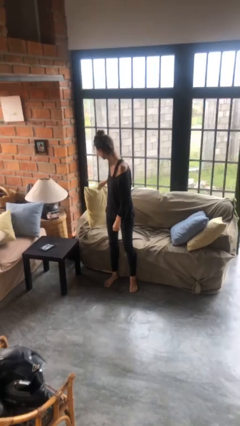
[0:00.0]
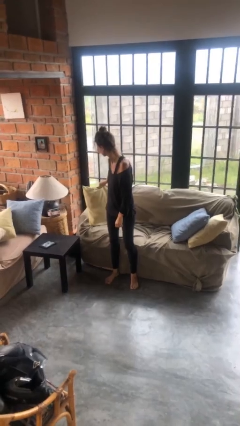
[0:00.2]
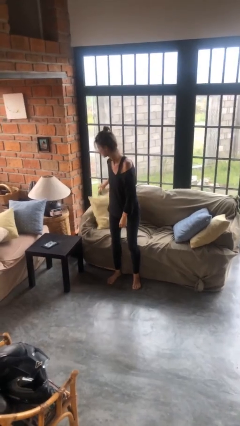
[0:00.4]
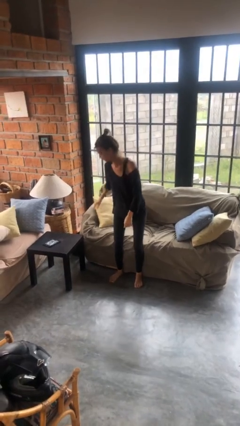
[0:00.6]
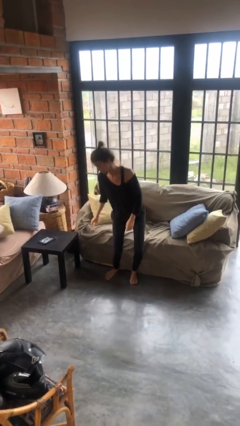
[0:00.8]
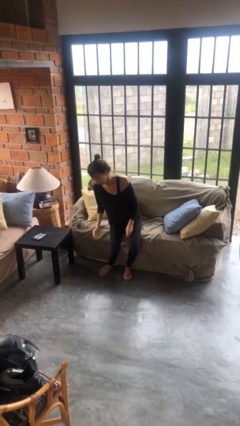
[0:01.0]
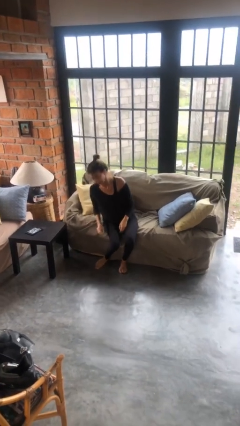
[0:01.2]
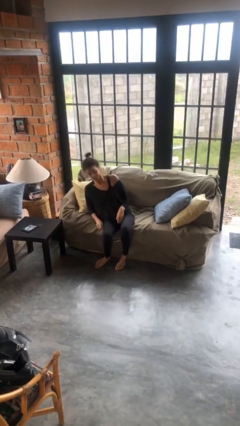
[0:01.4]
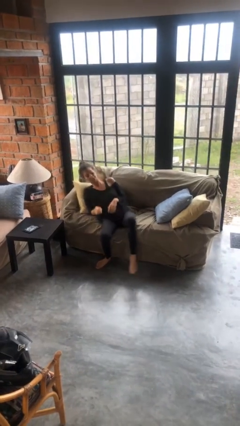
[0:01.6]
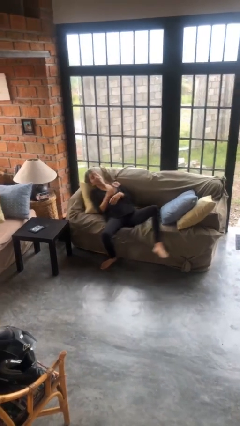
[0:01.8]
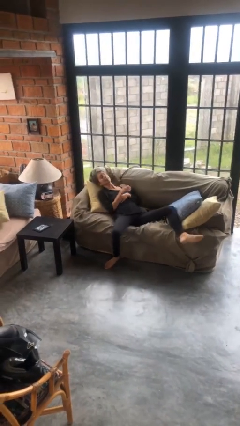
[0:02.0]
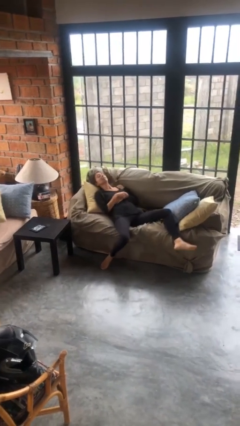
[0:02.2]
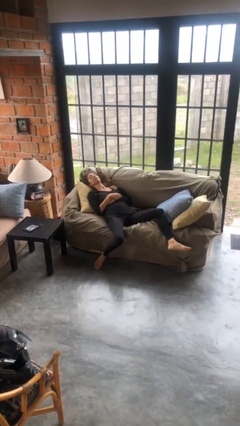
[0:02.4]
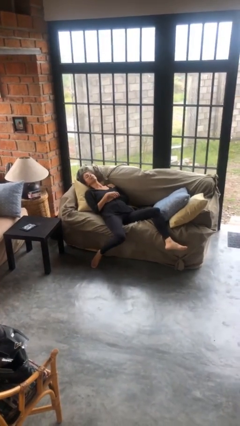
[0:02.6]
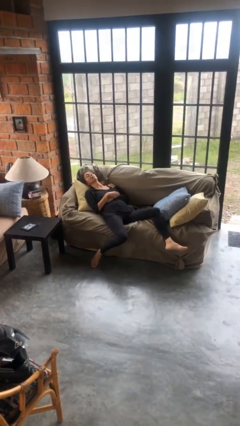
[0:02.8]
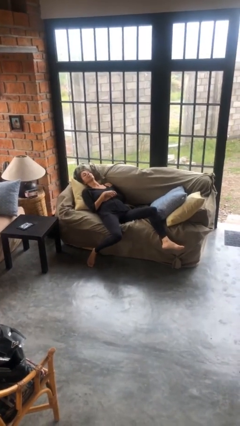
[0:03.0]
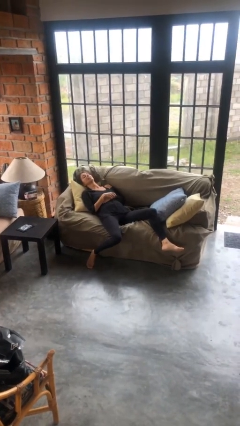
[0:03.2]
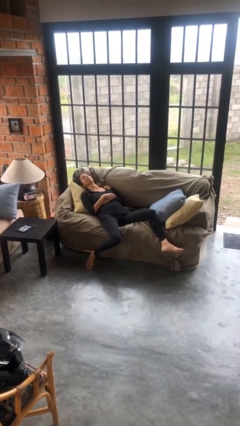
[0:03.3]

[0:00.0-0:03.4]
person lies down on couch

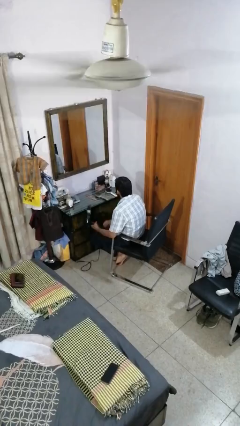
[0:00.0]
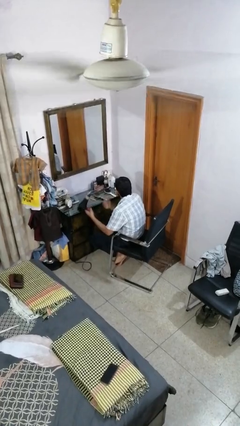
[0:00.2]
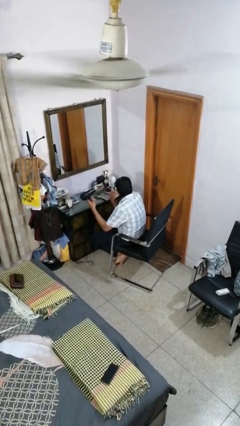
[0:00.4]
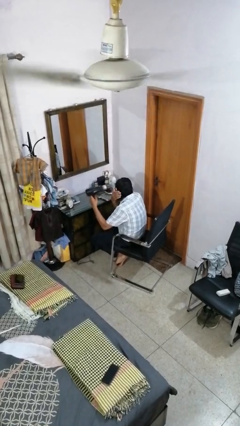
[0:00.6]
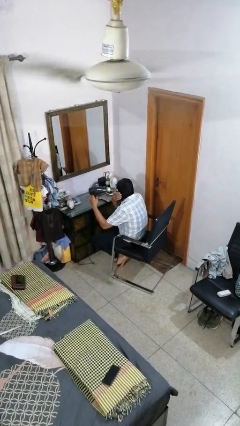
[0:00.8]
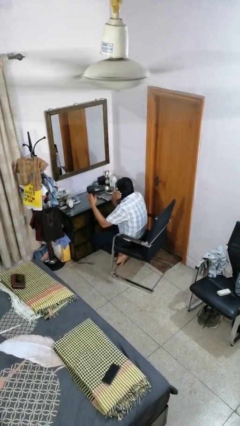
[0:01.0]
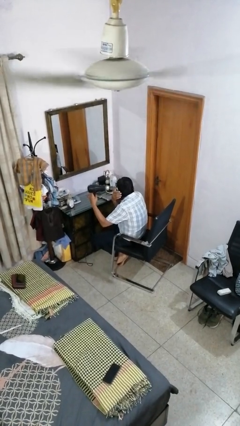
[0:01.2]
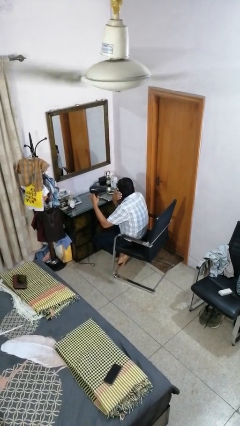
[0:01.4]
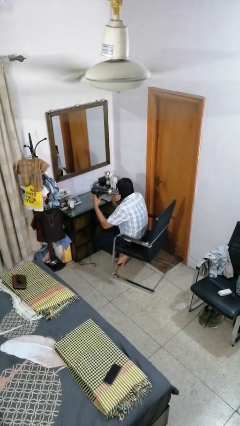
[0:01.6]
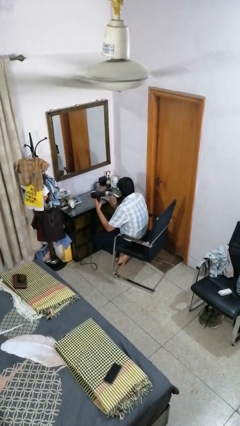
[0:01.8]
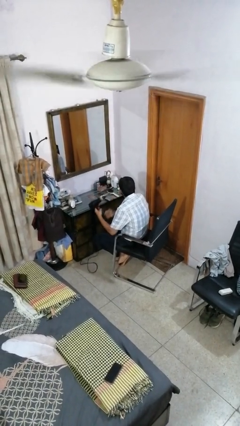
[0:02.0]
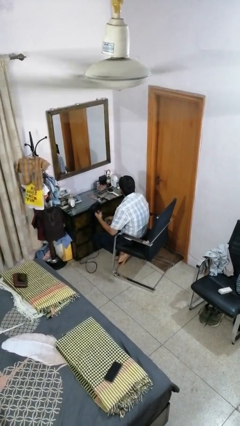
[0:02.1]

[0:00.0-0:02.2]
person dries hair with hairdryer

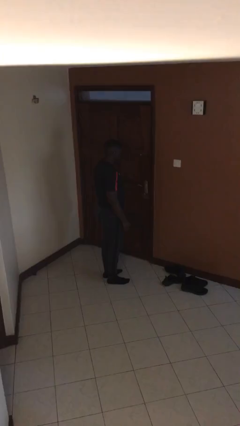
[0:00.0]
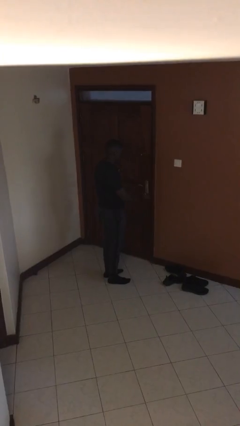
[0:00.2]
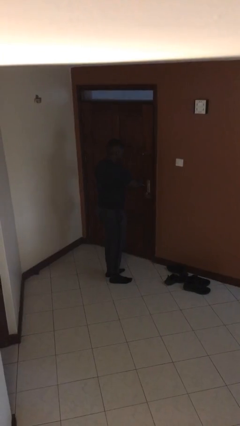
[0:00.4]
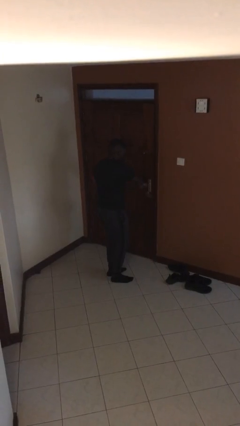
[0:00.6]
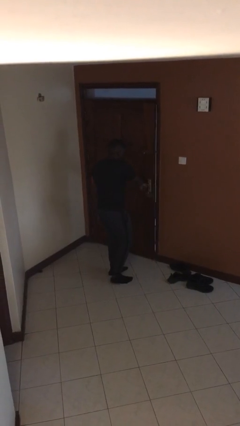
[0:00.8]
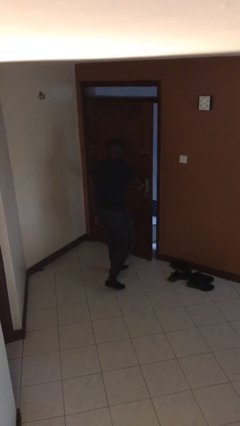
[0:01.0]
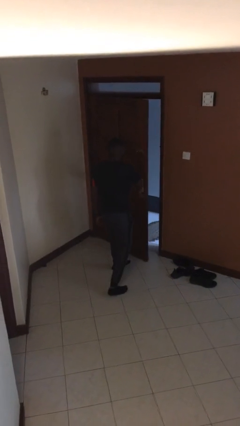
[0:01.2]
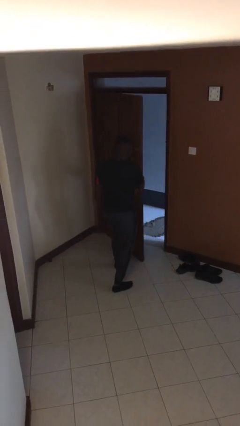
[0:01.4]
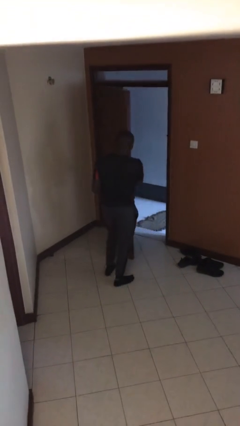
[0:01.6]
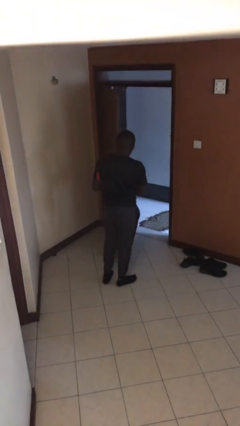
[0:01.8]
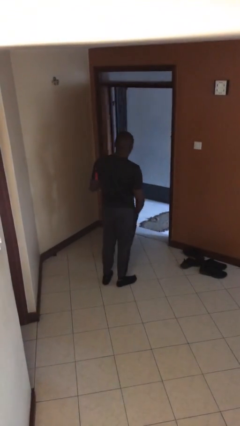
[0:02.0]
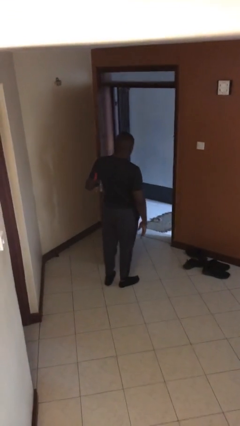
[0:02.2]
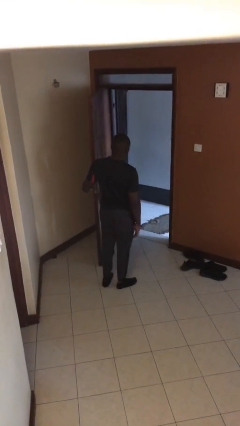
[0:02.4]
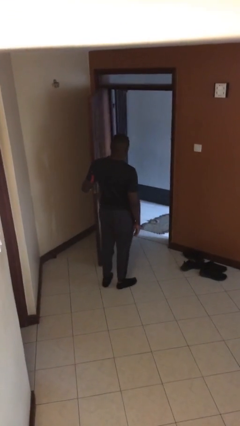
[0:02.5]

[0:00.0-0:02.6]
person opens facility door

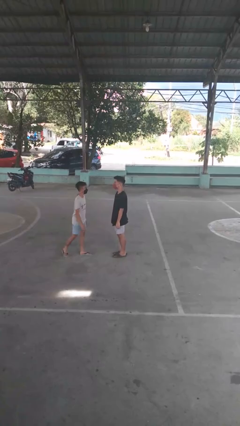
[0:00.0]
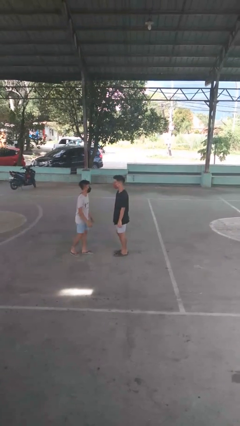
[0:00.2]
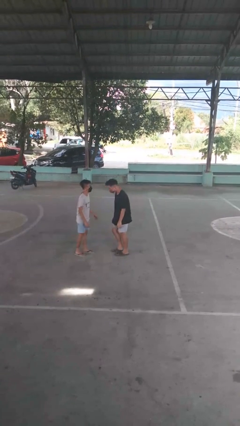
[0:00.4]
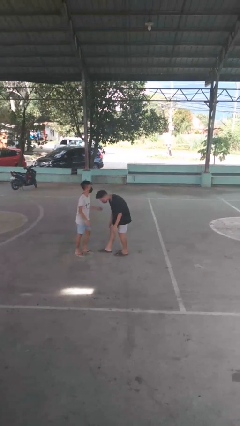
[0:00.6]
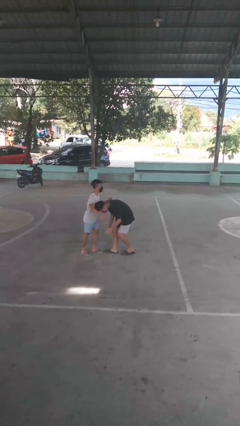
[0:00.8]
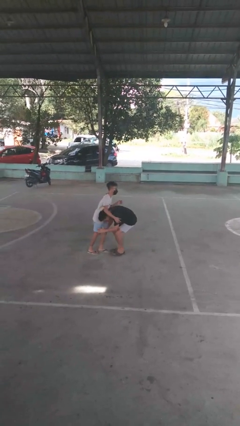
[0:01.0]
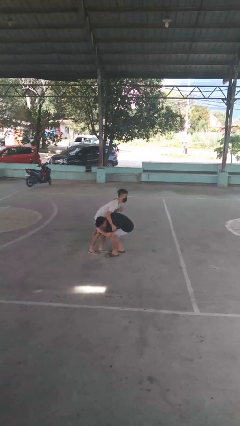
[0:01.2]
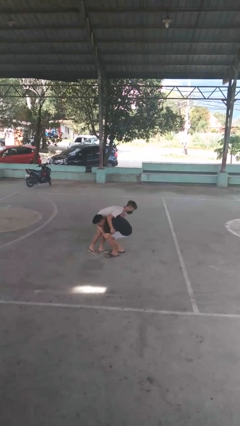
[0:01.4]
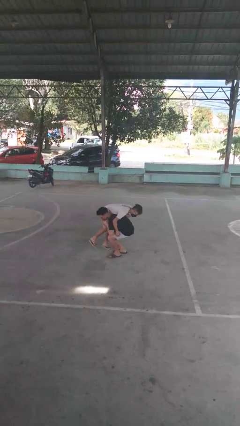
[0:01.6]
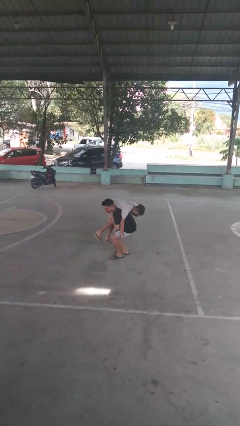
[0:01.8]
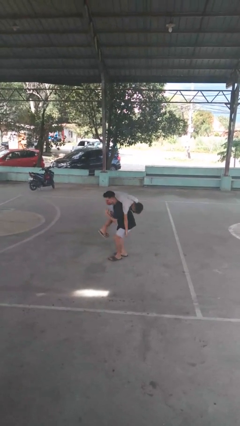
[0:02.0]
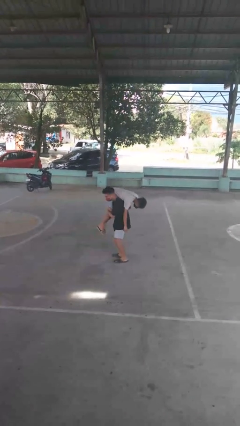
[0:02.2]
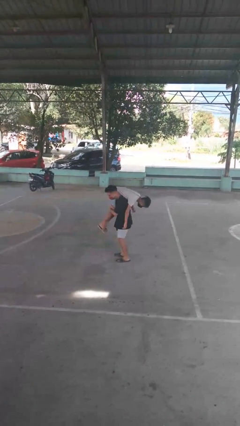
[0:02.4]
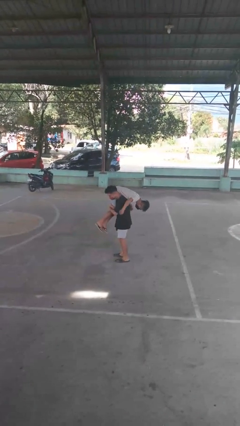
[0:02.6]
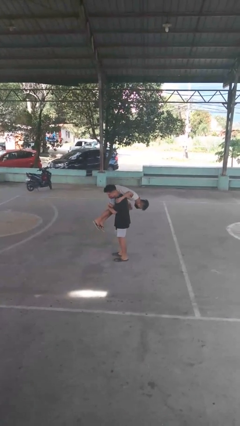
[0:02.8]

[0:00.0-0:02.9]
person carries person over shoulder

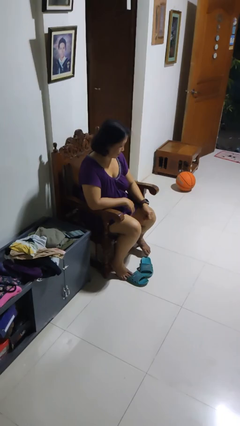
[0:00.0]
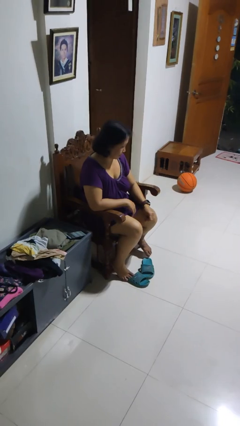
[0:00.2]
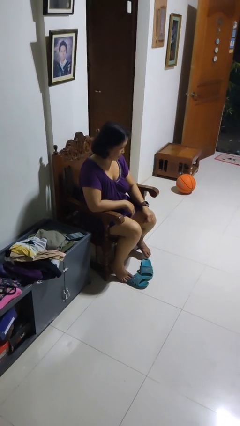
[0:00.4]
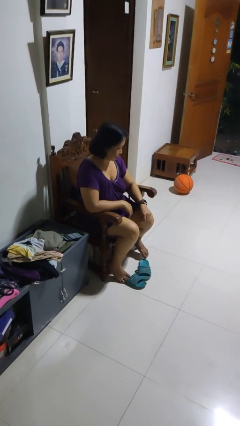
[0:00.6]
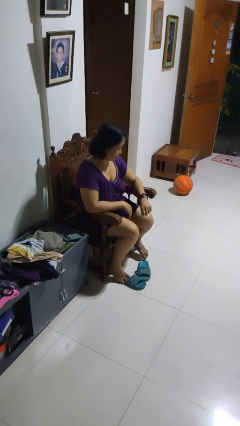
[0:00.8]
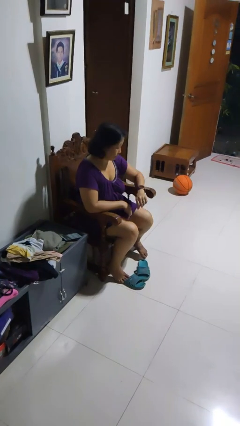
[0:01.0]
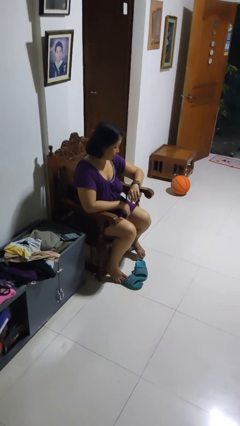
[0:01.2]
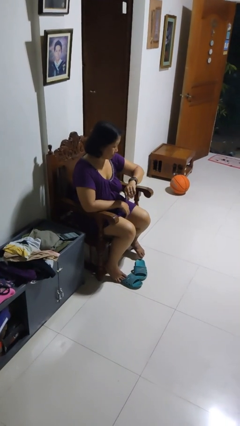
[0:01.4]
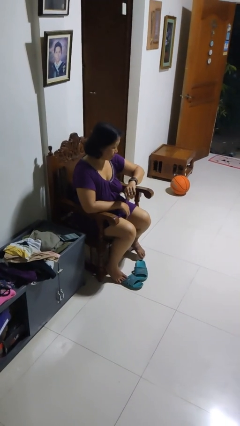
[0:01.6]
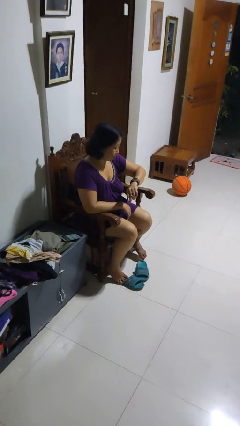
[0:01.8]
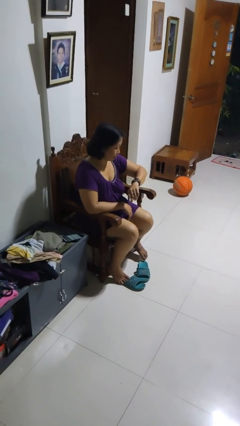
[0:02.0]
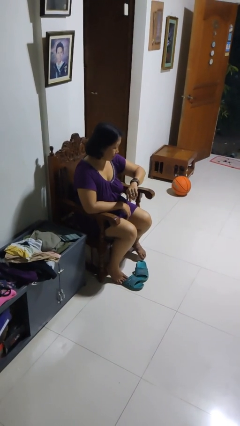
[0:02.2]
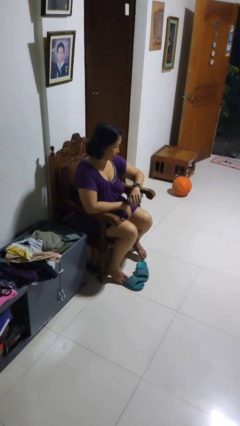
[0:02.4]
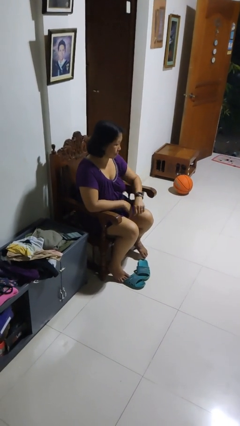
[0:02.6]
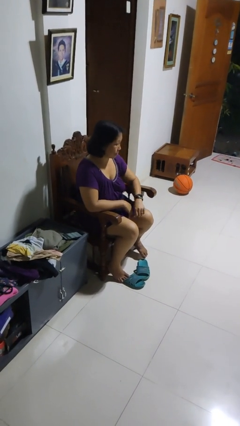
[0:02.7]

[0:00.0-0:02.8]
person looks at wristwatch

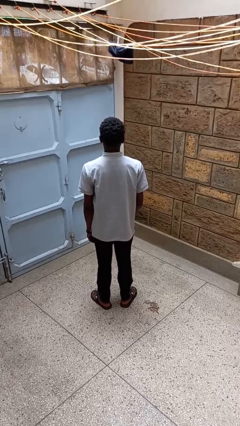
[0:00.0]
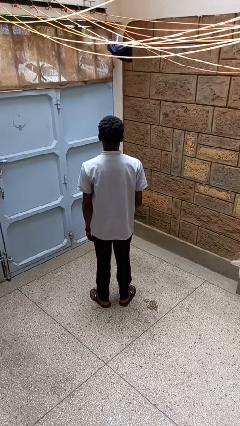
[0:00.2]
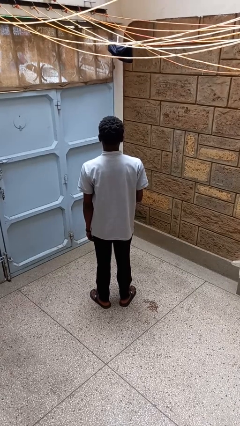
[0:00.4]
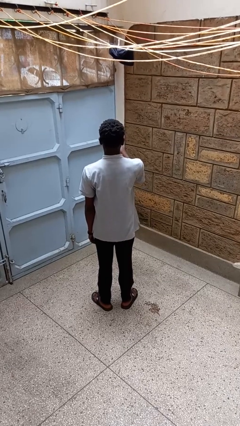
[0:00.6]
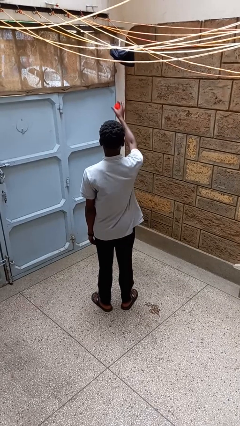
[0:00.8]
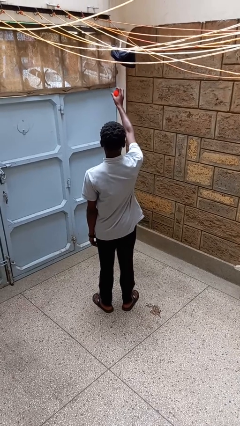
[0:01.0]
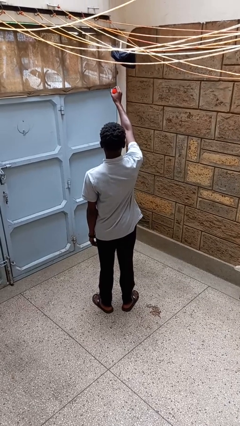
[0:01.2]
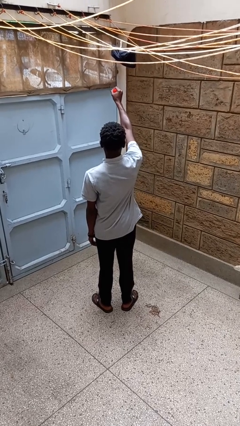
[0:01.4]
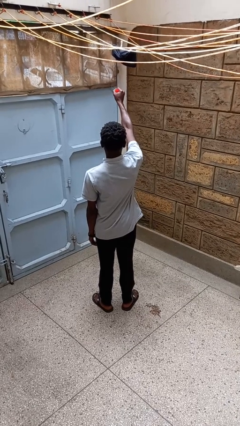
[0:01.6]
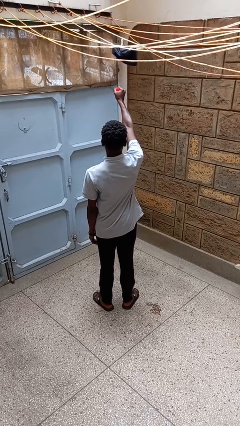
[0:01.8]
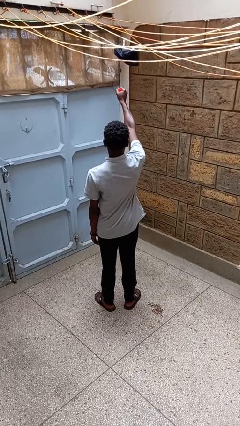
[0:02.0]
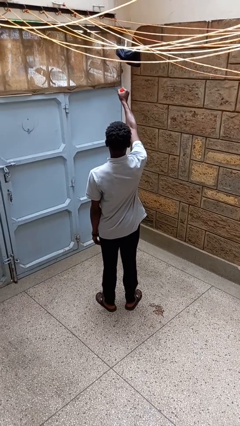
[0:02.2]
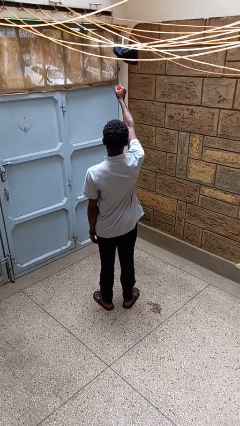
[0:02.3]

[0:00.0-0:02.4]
person squeezes object

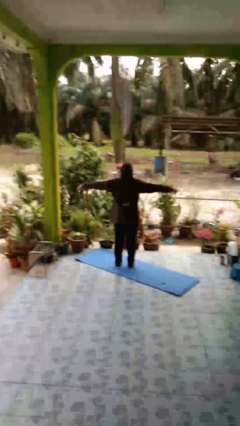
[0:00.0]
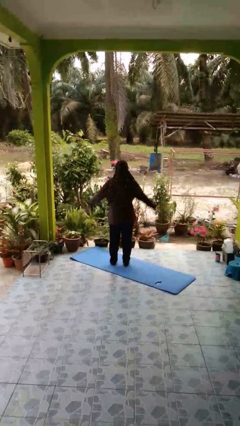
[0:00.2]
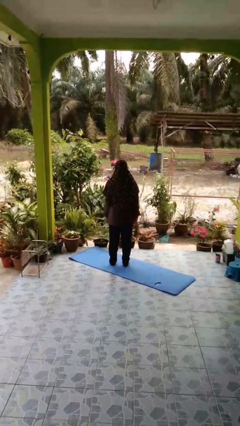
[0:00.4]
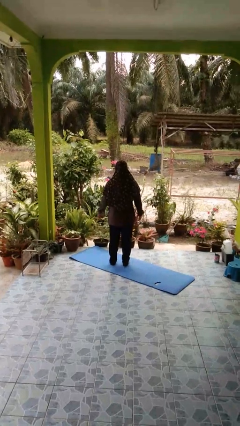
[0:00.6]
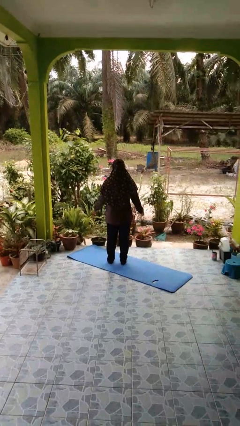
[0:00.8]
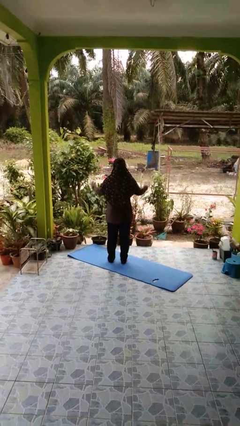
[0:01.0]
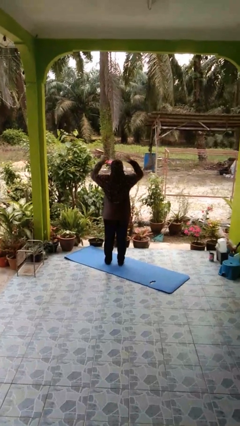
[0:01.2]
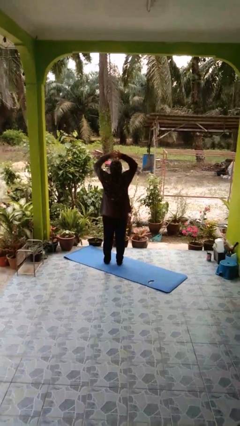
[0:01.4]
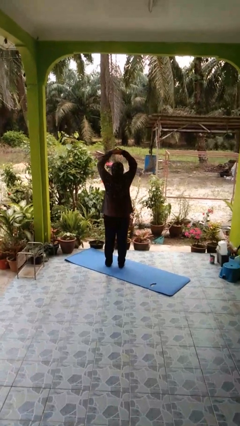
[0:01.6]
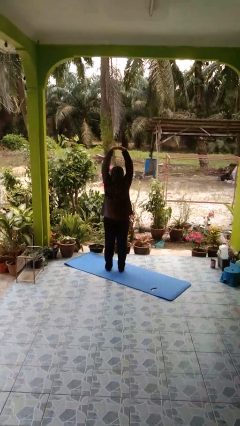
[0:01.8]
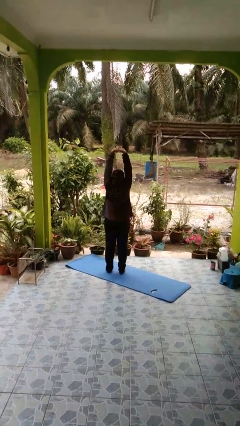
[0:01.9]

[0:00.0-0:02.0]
person stretches arms to side
